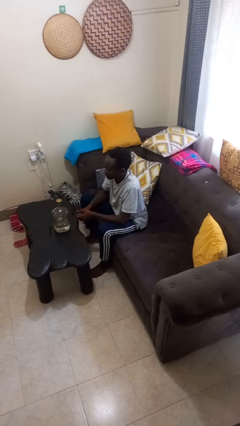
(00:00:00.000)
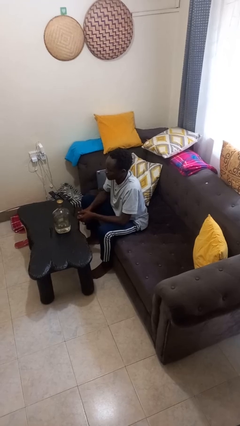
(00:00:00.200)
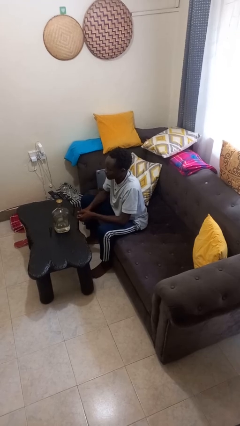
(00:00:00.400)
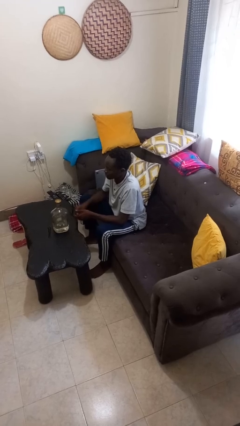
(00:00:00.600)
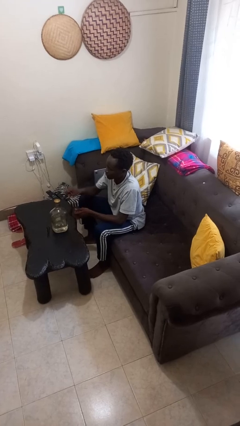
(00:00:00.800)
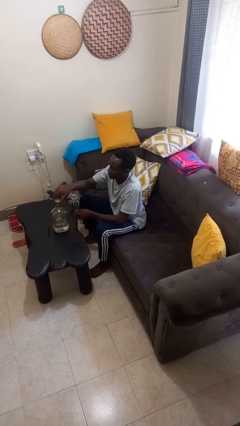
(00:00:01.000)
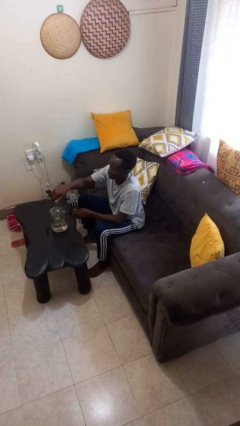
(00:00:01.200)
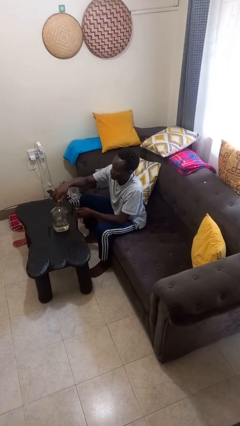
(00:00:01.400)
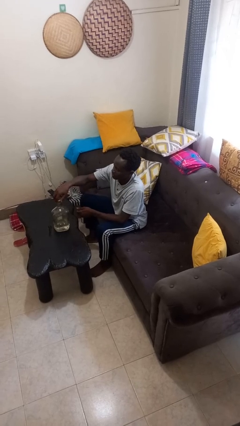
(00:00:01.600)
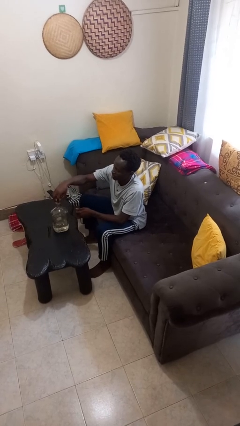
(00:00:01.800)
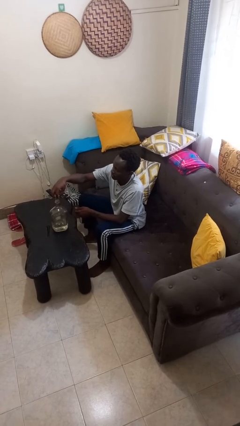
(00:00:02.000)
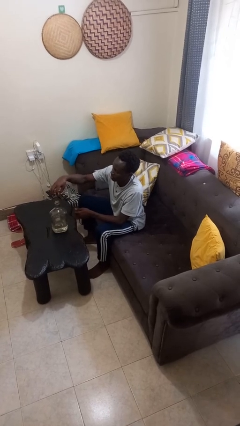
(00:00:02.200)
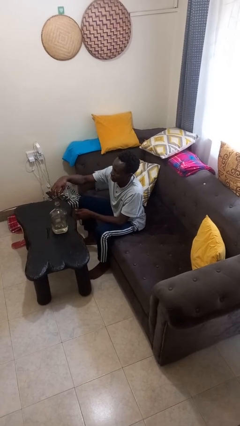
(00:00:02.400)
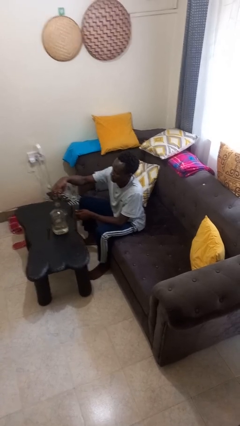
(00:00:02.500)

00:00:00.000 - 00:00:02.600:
person unscrews lid from bottle

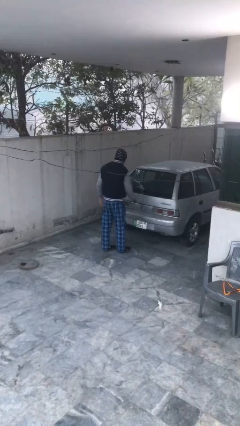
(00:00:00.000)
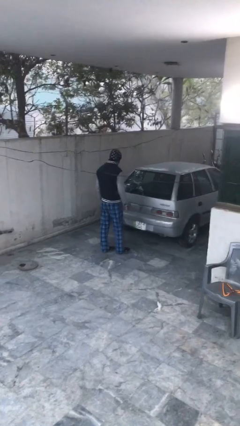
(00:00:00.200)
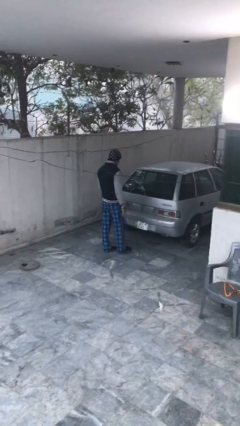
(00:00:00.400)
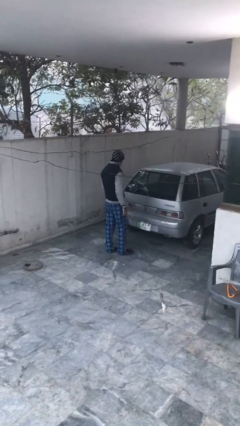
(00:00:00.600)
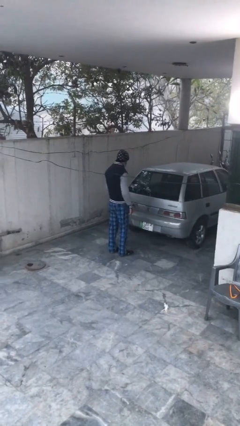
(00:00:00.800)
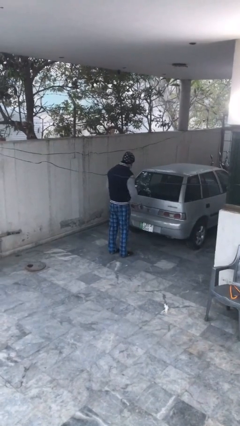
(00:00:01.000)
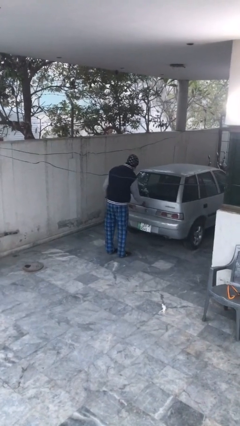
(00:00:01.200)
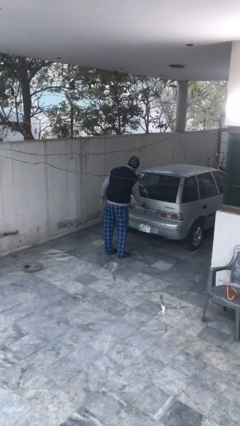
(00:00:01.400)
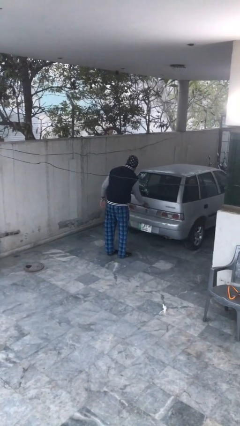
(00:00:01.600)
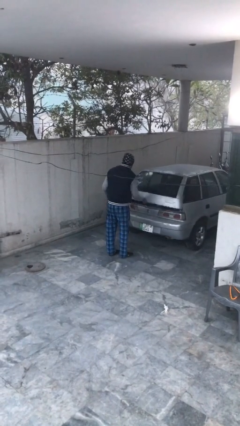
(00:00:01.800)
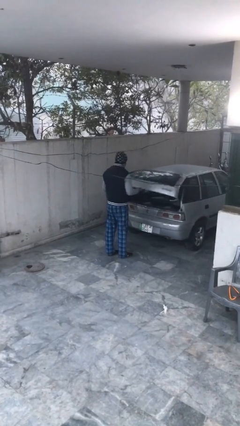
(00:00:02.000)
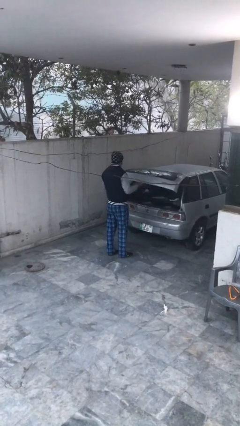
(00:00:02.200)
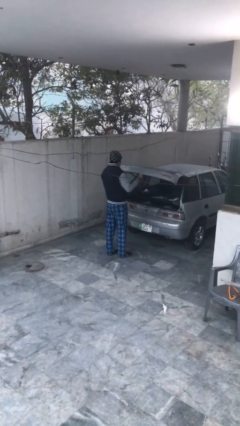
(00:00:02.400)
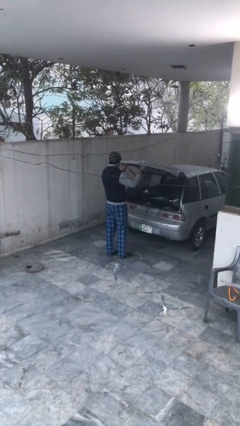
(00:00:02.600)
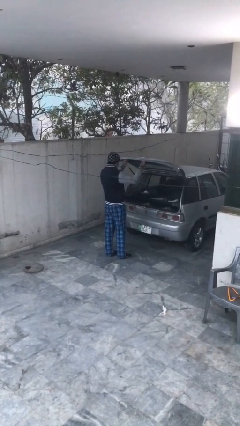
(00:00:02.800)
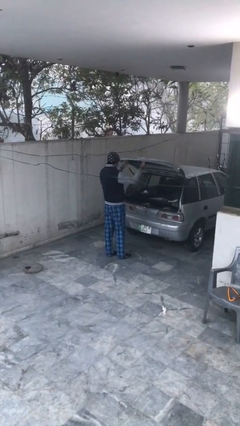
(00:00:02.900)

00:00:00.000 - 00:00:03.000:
person opens car trunk

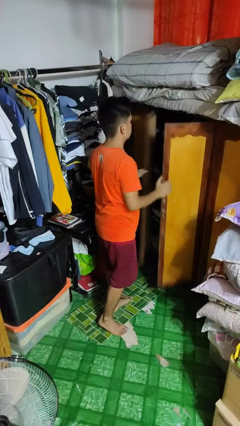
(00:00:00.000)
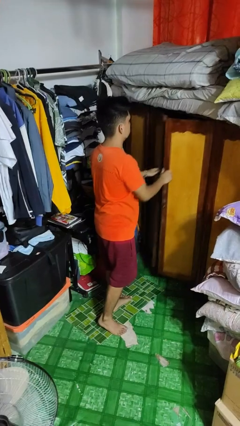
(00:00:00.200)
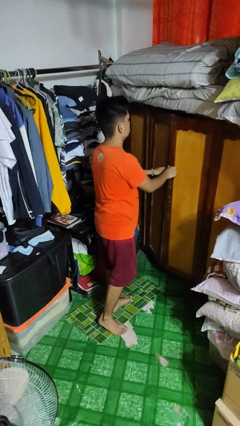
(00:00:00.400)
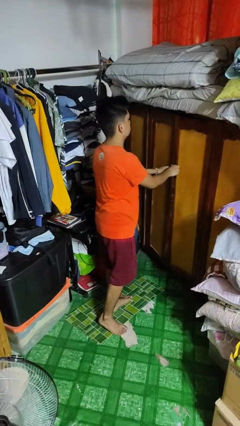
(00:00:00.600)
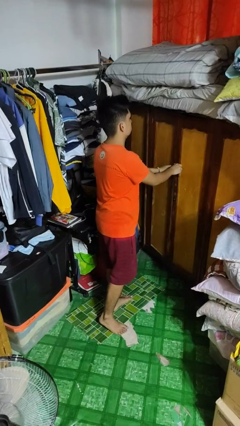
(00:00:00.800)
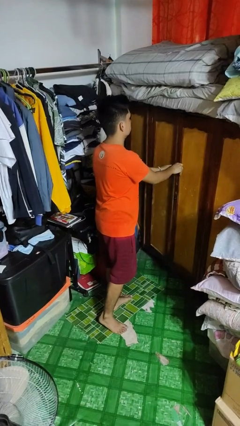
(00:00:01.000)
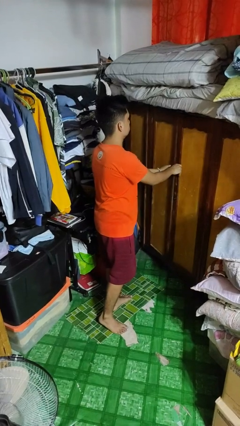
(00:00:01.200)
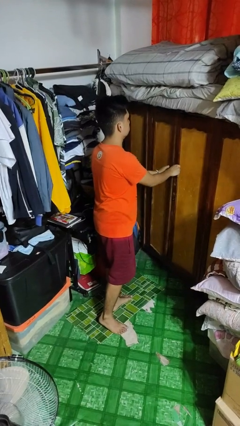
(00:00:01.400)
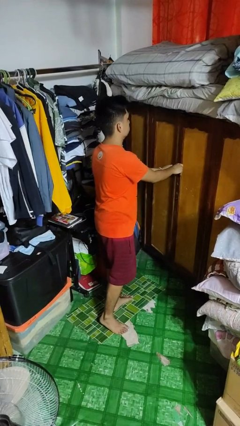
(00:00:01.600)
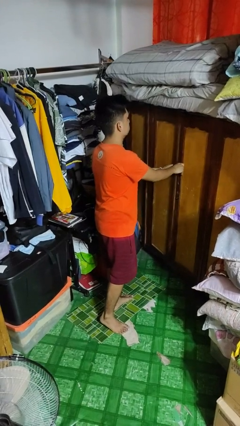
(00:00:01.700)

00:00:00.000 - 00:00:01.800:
person closes closet door

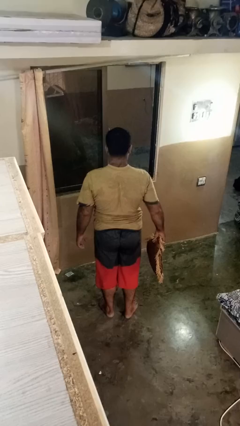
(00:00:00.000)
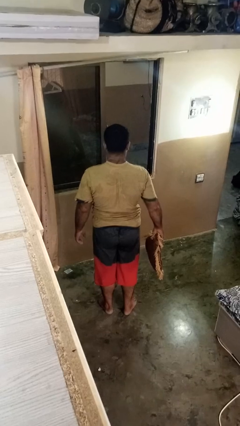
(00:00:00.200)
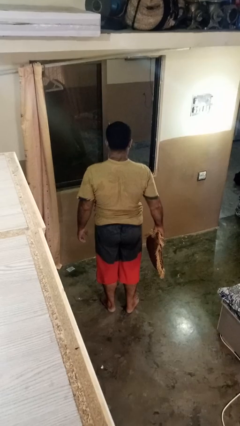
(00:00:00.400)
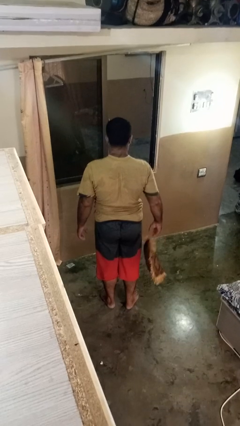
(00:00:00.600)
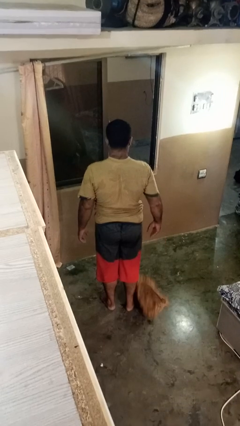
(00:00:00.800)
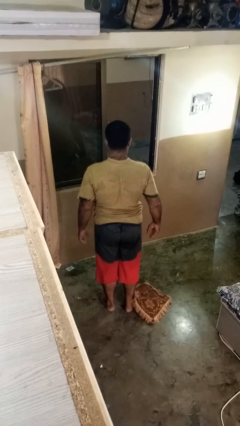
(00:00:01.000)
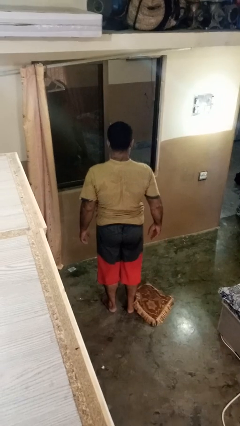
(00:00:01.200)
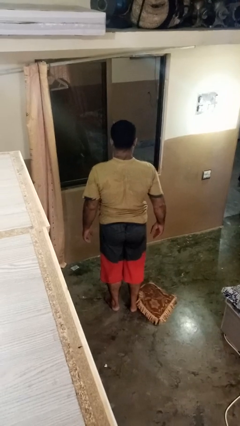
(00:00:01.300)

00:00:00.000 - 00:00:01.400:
person drops object

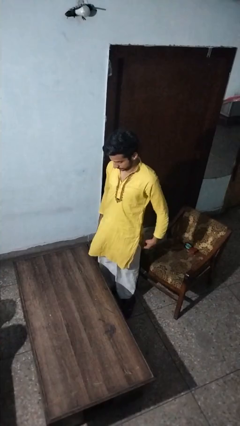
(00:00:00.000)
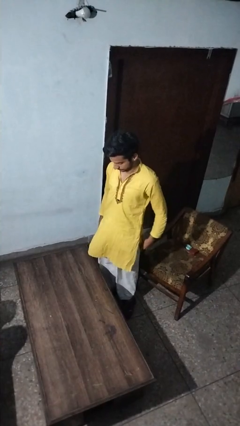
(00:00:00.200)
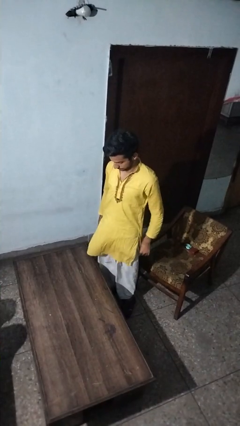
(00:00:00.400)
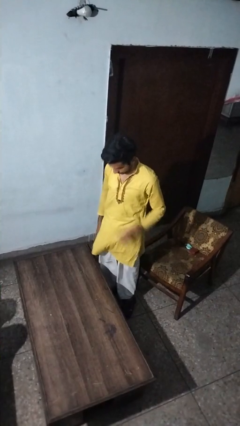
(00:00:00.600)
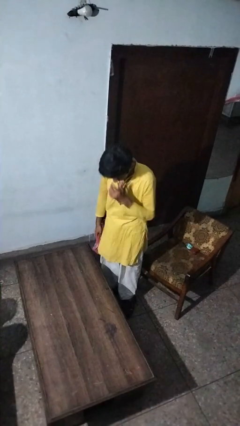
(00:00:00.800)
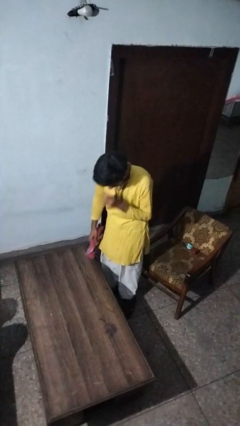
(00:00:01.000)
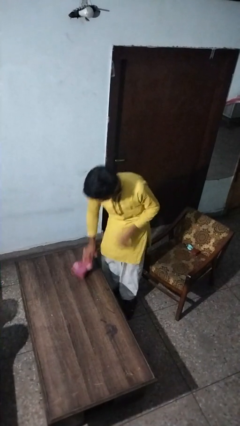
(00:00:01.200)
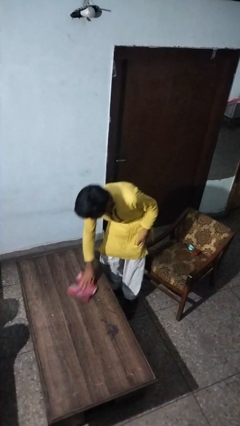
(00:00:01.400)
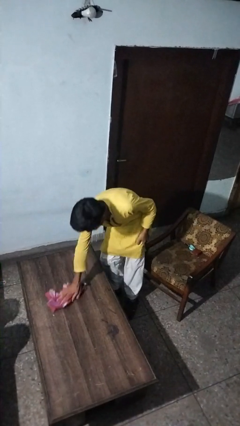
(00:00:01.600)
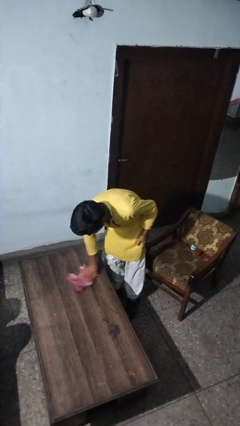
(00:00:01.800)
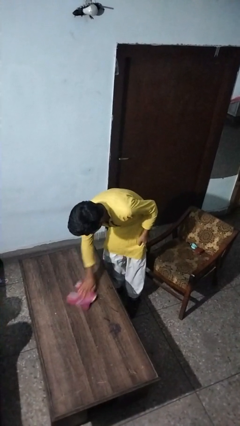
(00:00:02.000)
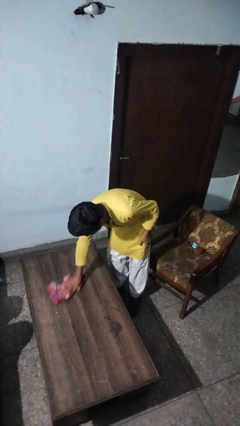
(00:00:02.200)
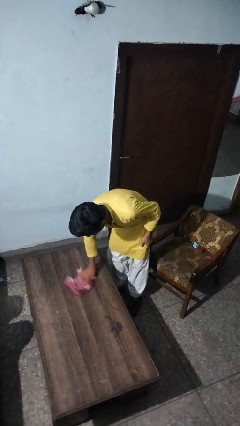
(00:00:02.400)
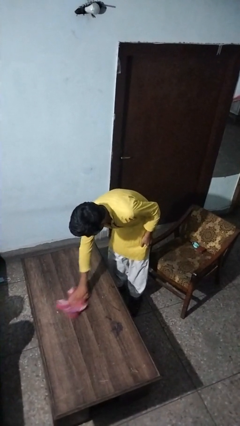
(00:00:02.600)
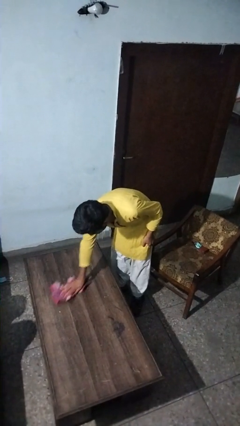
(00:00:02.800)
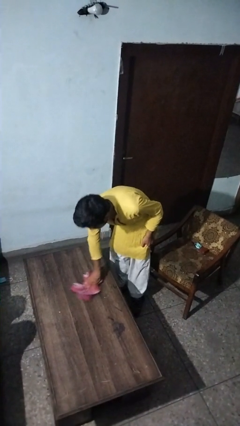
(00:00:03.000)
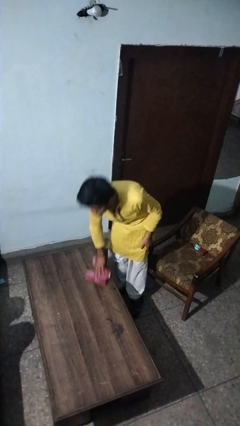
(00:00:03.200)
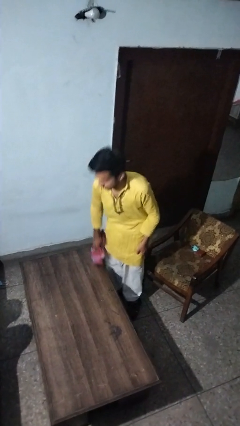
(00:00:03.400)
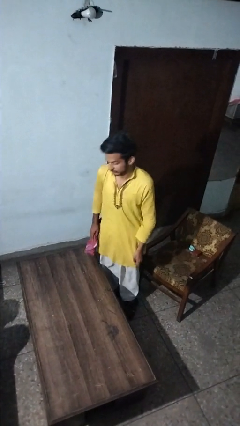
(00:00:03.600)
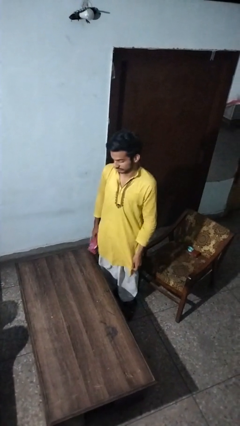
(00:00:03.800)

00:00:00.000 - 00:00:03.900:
person cleans table with rag

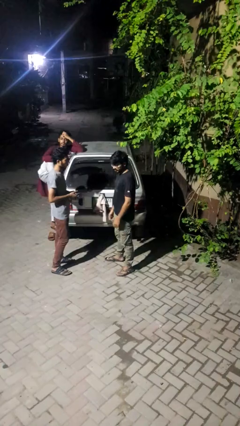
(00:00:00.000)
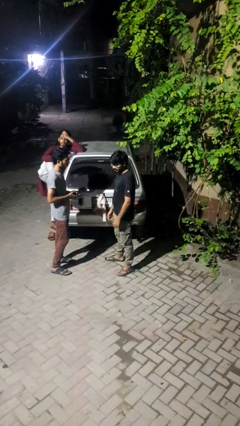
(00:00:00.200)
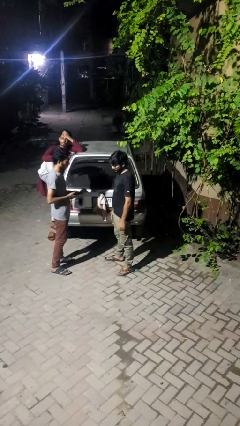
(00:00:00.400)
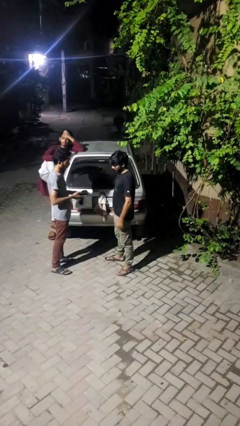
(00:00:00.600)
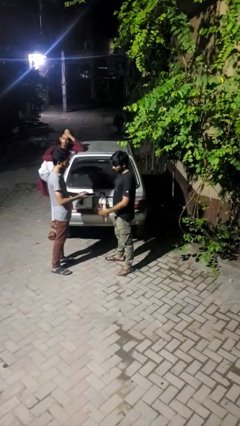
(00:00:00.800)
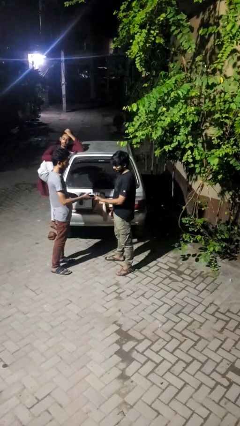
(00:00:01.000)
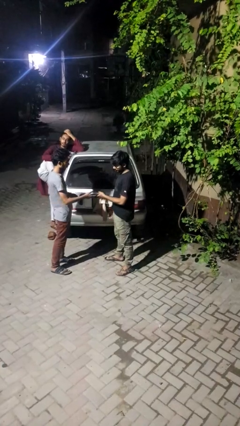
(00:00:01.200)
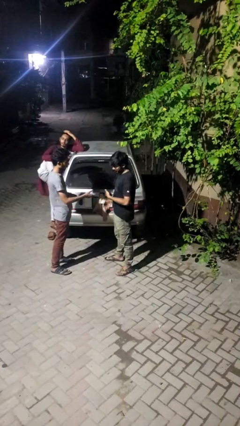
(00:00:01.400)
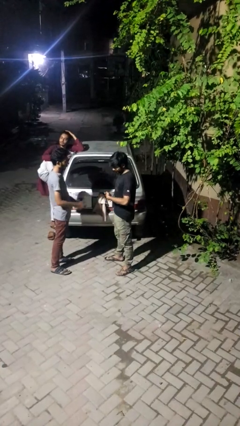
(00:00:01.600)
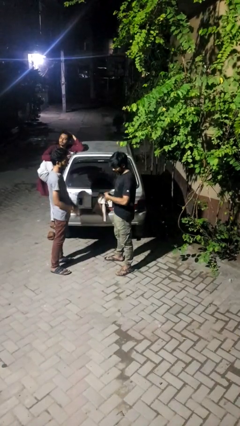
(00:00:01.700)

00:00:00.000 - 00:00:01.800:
person transfers object to person

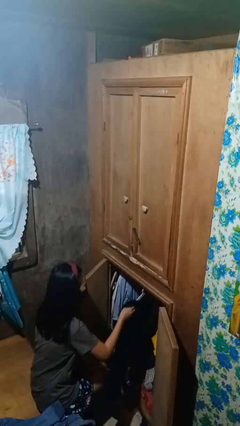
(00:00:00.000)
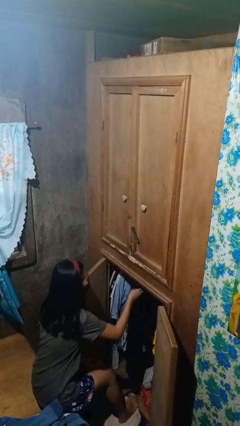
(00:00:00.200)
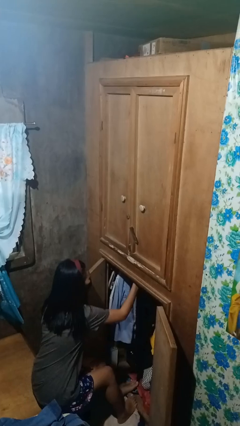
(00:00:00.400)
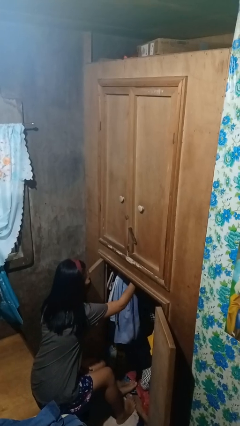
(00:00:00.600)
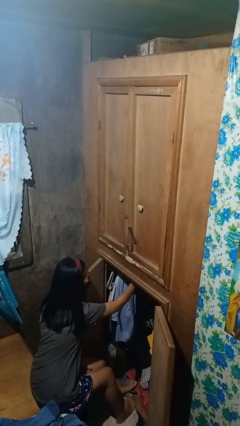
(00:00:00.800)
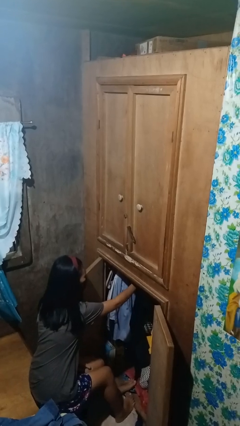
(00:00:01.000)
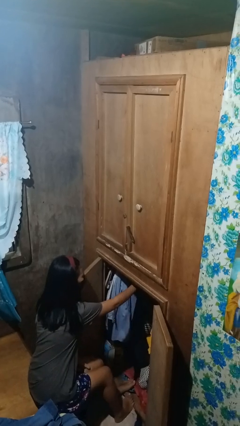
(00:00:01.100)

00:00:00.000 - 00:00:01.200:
person puts clothes into closet

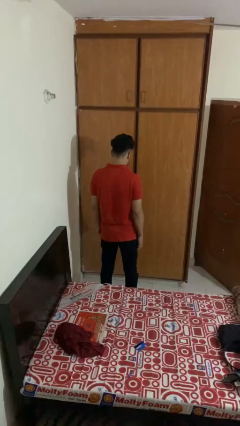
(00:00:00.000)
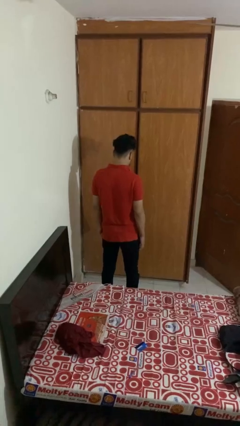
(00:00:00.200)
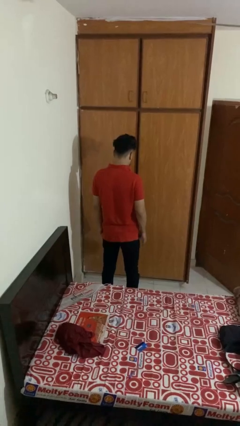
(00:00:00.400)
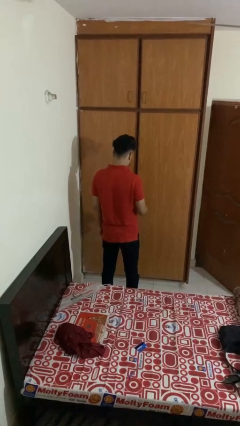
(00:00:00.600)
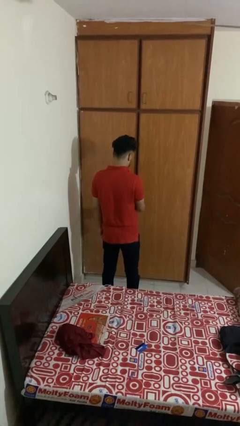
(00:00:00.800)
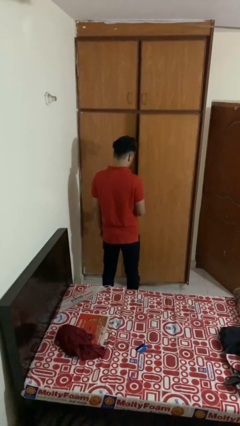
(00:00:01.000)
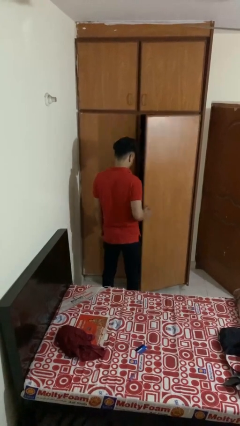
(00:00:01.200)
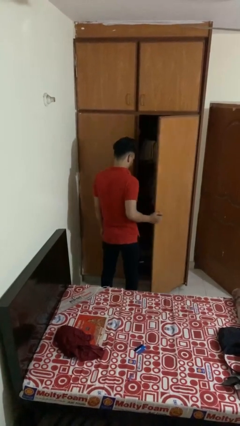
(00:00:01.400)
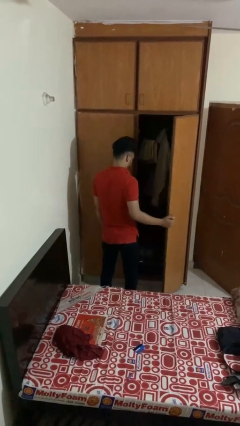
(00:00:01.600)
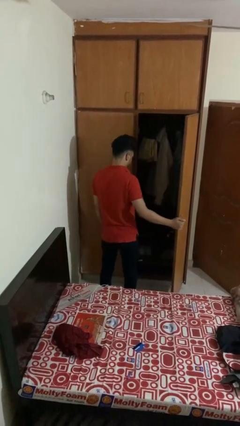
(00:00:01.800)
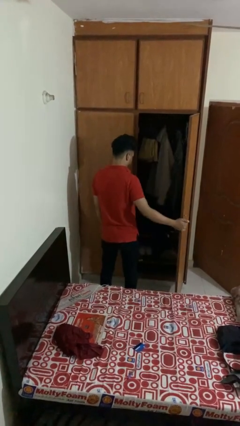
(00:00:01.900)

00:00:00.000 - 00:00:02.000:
person opens closet door
